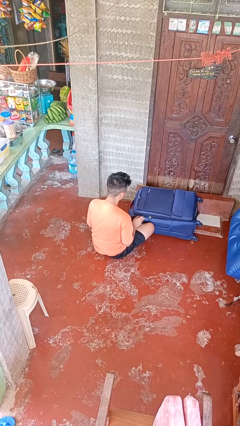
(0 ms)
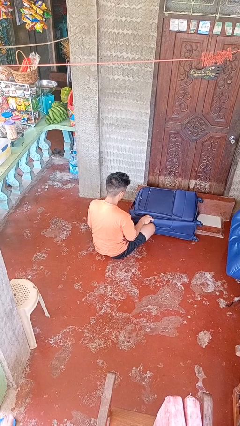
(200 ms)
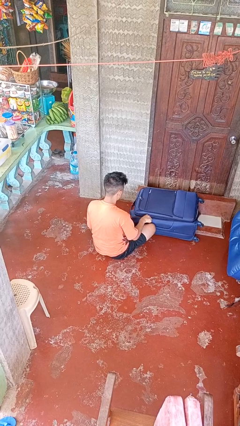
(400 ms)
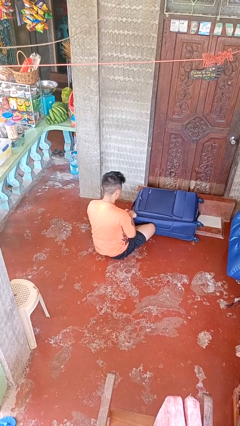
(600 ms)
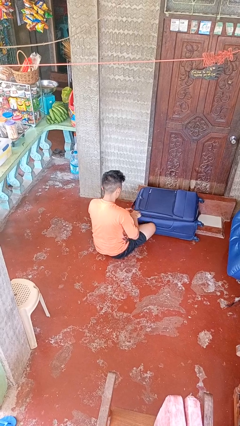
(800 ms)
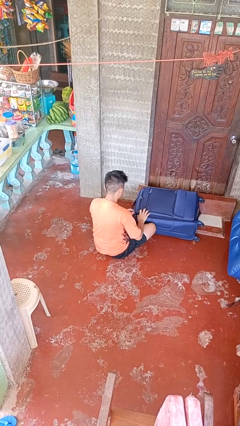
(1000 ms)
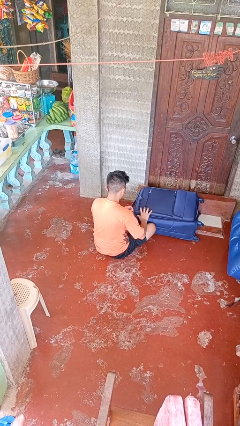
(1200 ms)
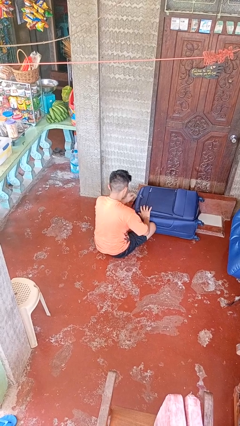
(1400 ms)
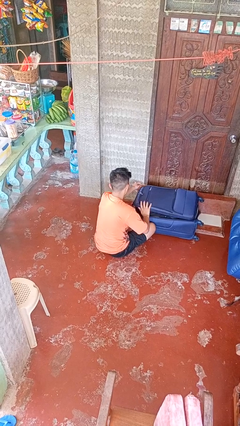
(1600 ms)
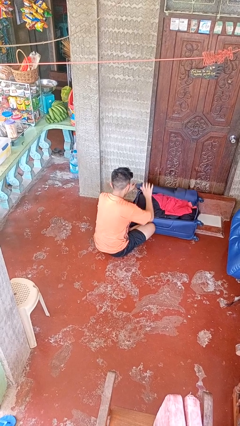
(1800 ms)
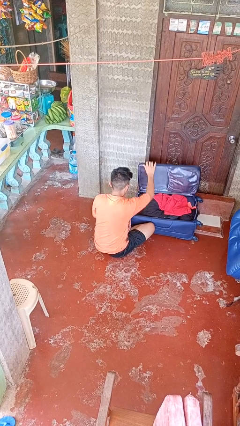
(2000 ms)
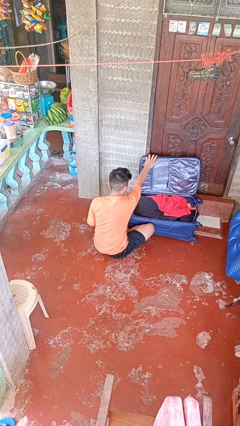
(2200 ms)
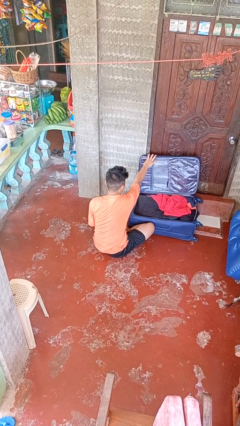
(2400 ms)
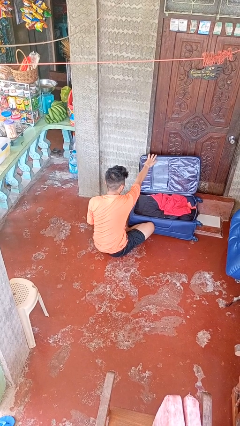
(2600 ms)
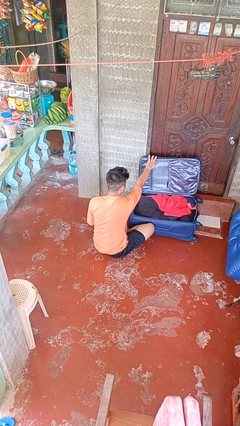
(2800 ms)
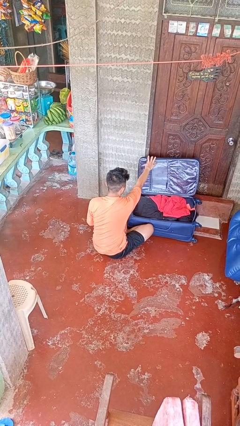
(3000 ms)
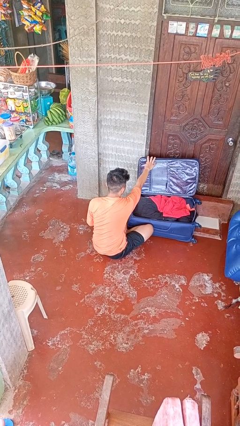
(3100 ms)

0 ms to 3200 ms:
person opens suitcase

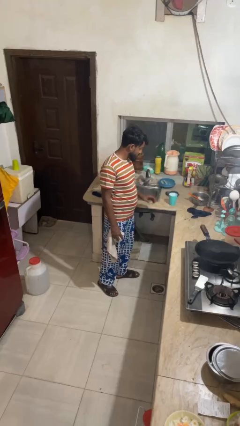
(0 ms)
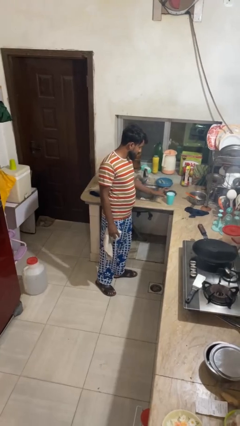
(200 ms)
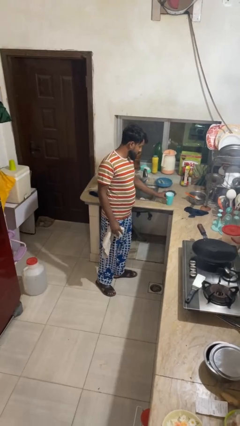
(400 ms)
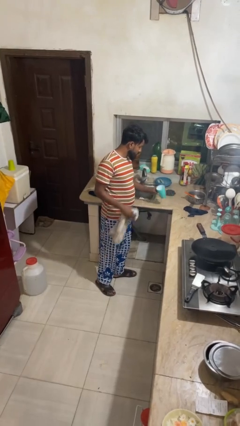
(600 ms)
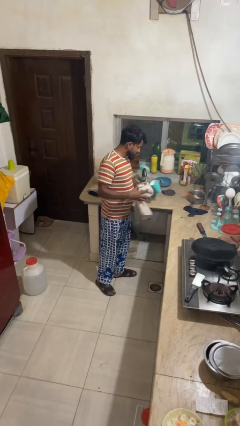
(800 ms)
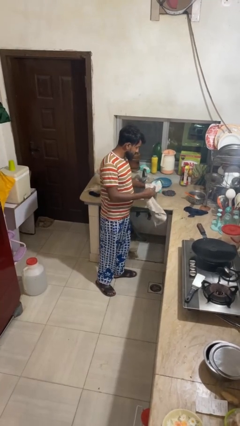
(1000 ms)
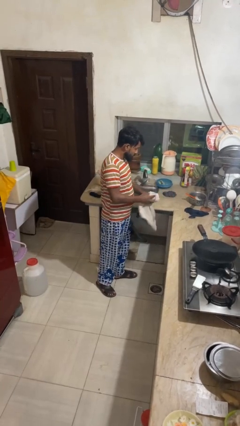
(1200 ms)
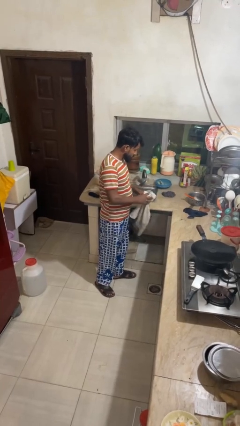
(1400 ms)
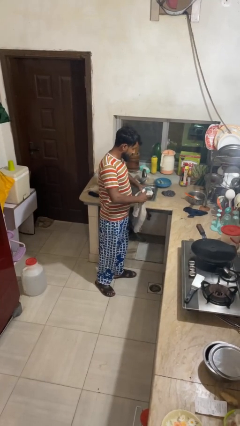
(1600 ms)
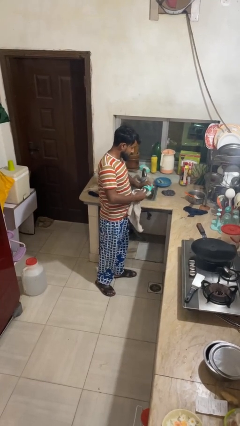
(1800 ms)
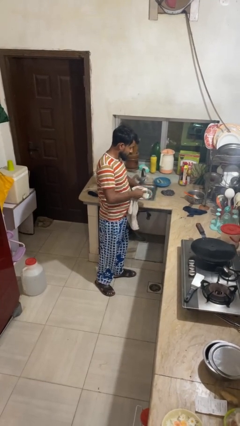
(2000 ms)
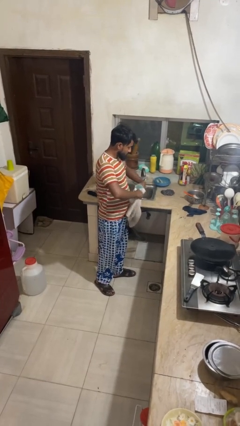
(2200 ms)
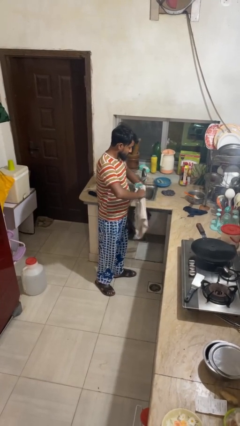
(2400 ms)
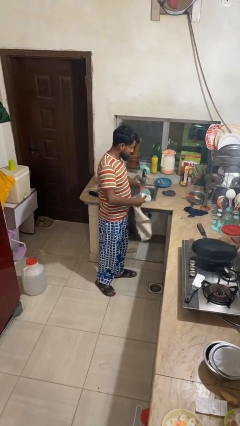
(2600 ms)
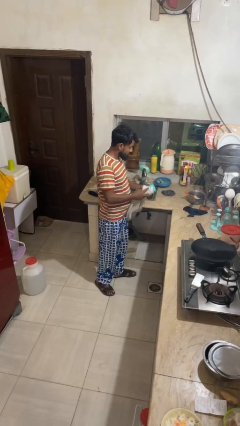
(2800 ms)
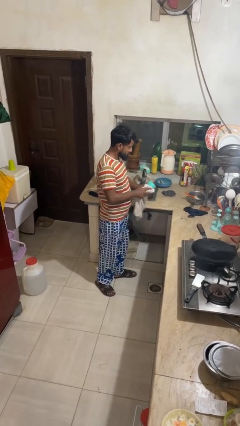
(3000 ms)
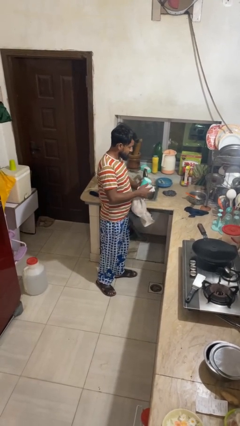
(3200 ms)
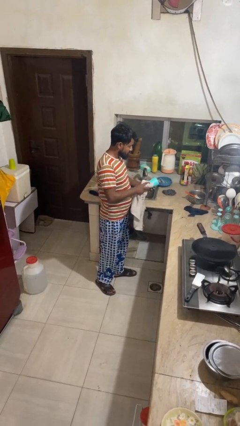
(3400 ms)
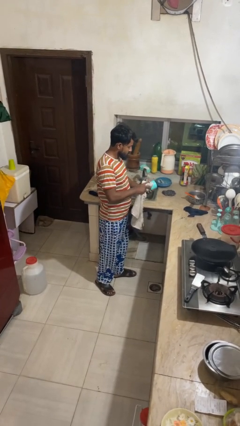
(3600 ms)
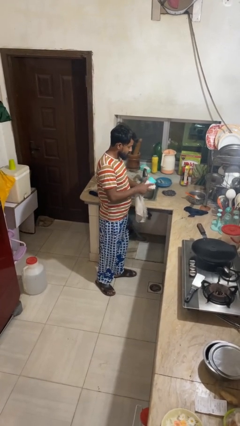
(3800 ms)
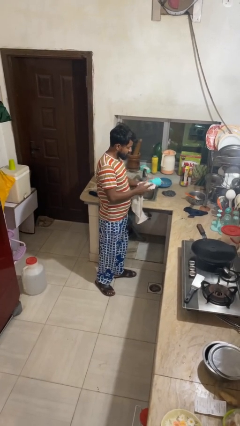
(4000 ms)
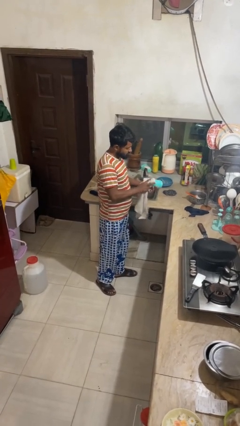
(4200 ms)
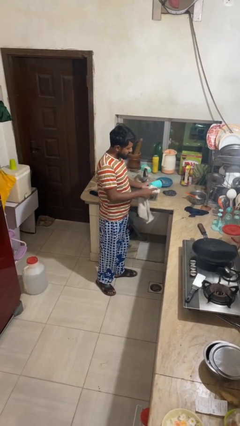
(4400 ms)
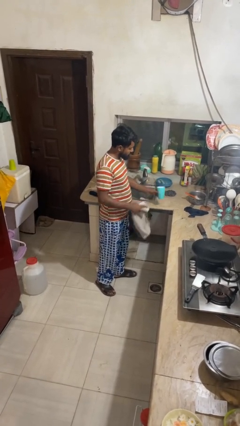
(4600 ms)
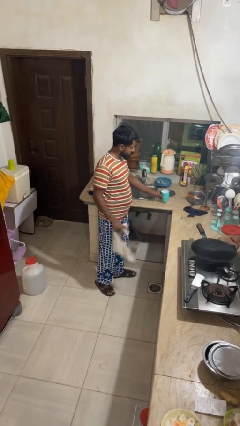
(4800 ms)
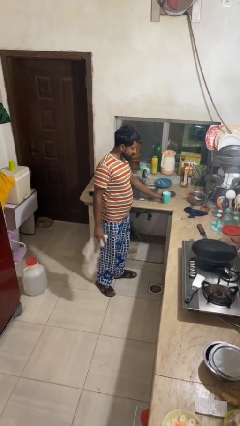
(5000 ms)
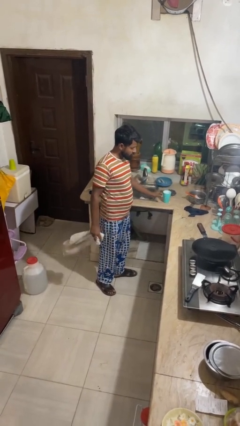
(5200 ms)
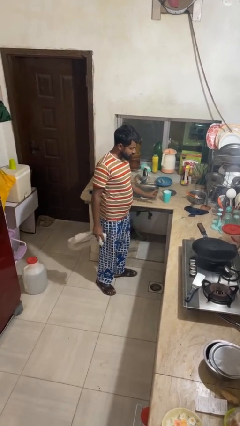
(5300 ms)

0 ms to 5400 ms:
person dries dish

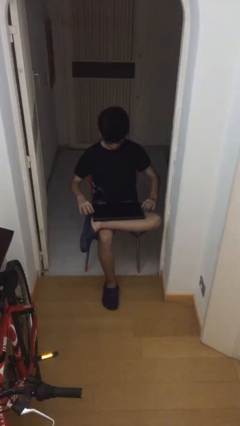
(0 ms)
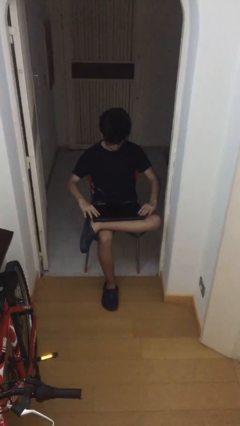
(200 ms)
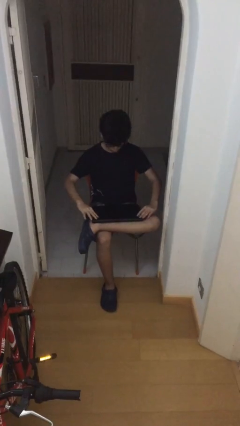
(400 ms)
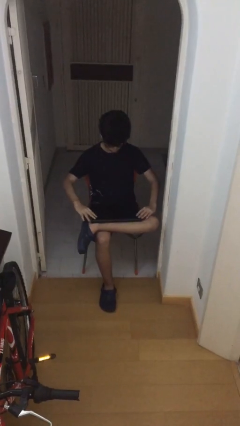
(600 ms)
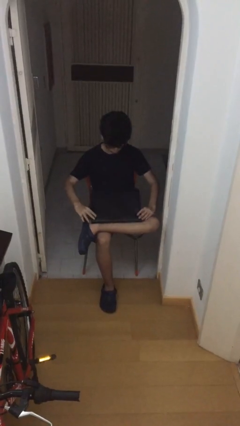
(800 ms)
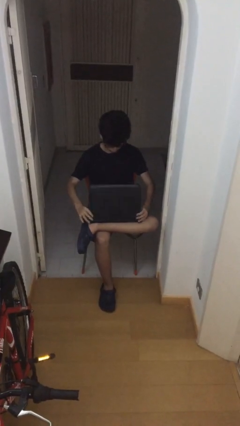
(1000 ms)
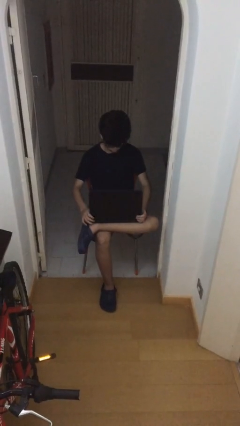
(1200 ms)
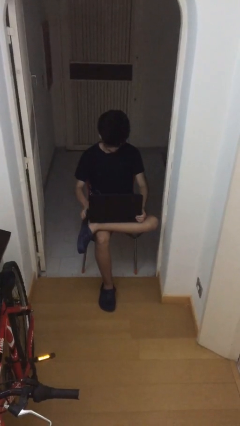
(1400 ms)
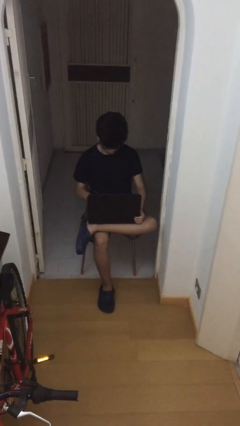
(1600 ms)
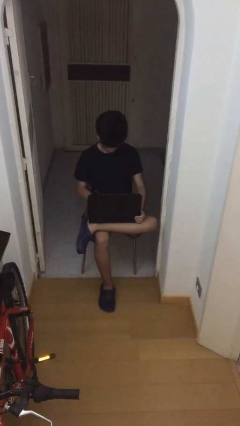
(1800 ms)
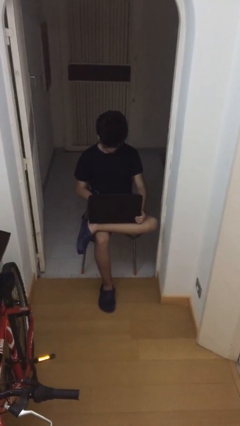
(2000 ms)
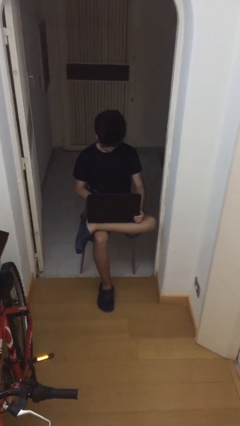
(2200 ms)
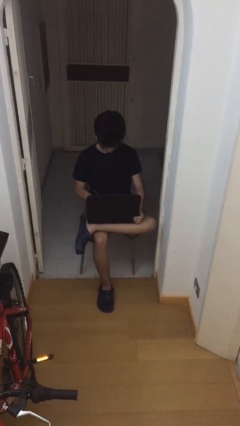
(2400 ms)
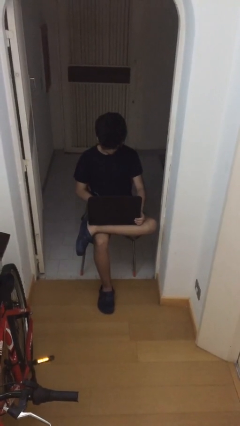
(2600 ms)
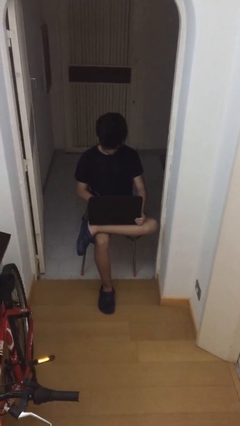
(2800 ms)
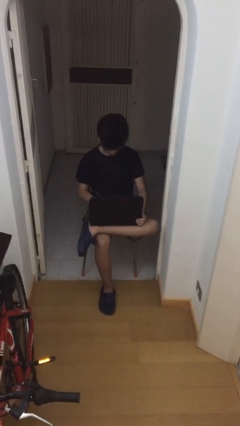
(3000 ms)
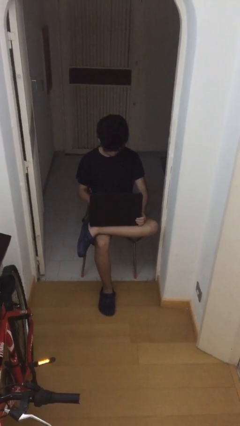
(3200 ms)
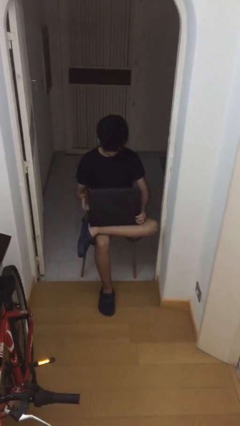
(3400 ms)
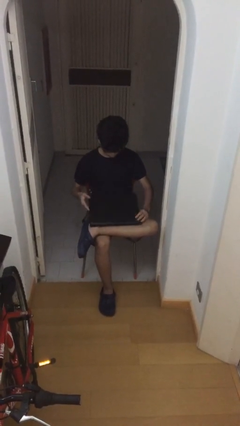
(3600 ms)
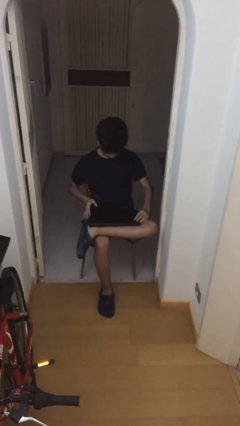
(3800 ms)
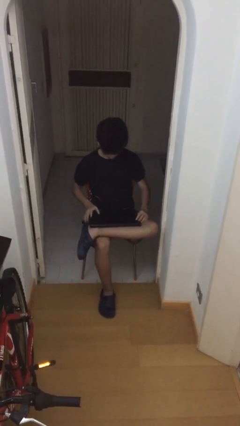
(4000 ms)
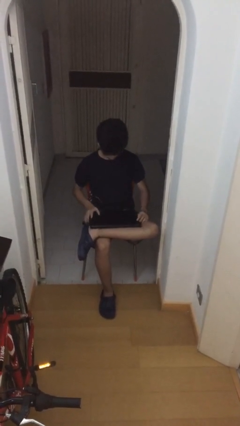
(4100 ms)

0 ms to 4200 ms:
person interacts with laptop

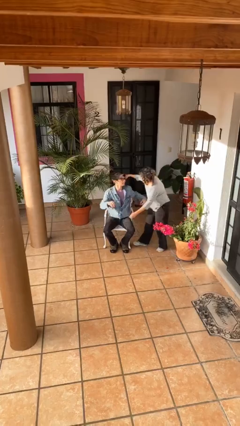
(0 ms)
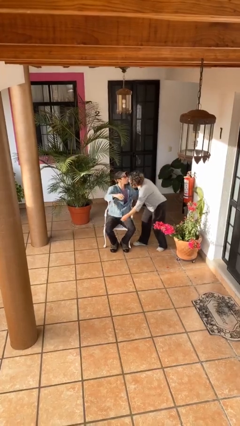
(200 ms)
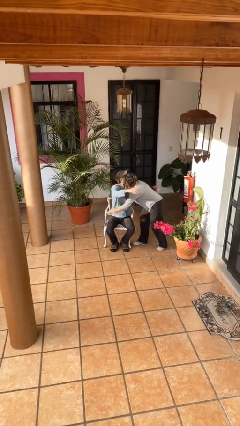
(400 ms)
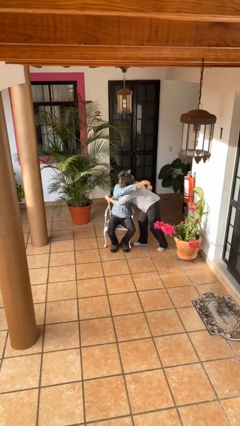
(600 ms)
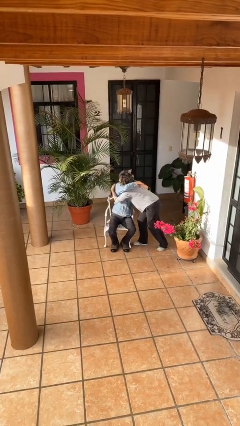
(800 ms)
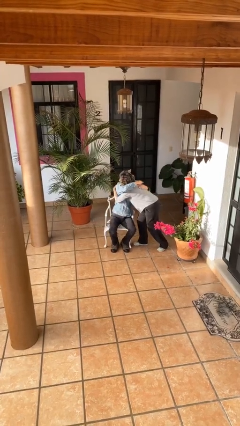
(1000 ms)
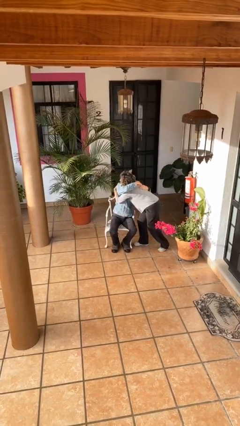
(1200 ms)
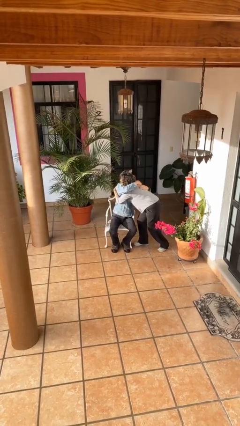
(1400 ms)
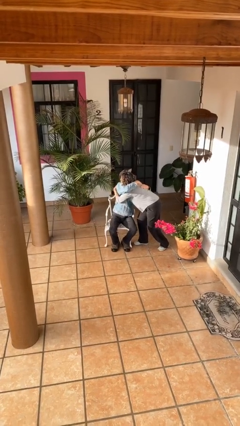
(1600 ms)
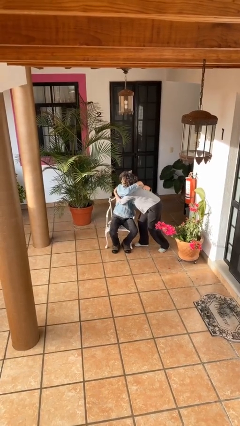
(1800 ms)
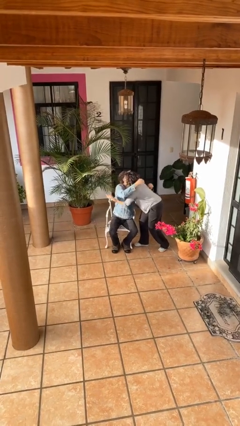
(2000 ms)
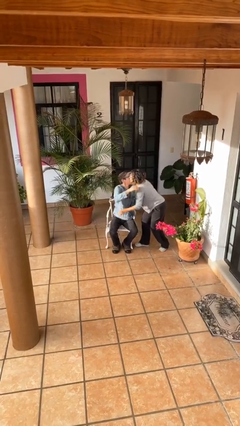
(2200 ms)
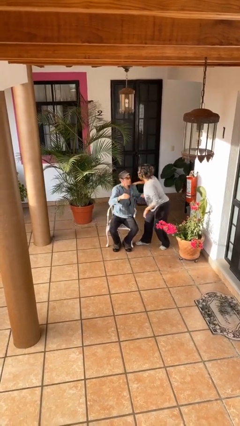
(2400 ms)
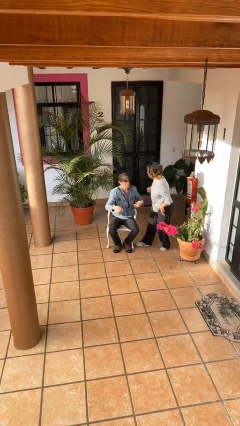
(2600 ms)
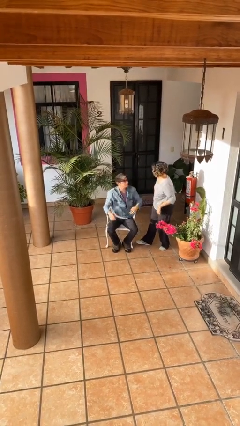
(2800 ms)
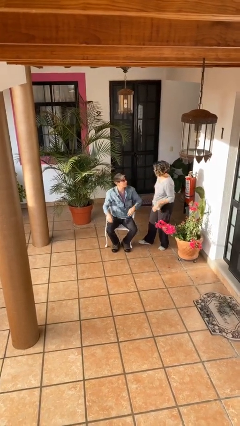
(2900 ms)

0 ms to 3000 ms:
person embraces person

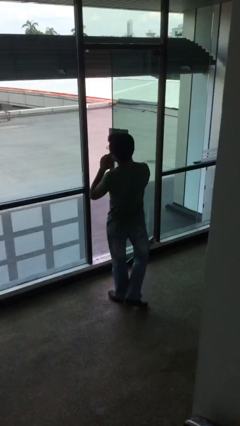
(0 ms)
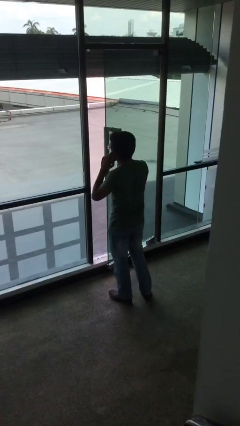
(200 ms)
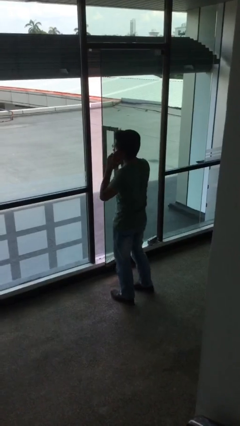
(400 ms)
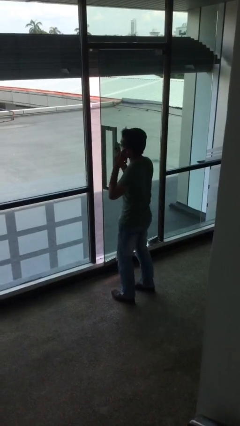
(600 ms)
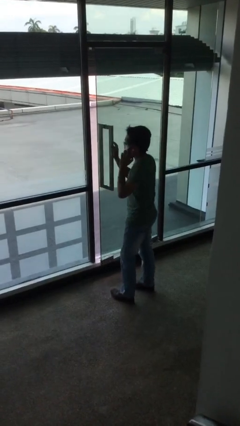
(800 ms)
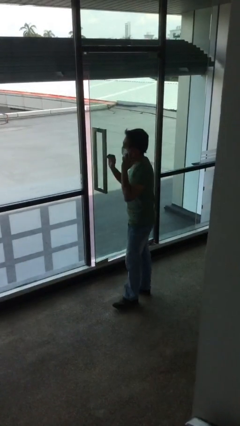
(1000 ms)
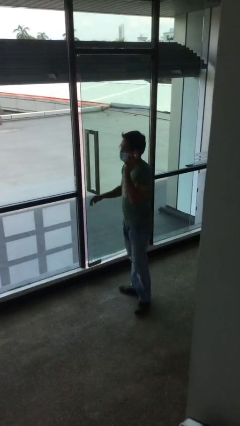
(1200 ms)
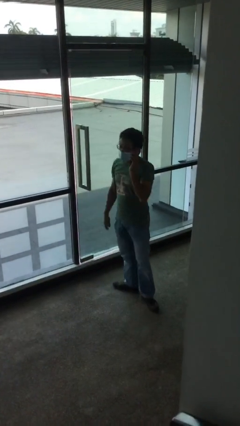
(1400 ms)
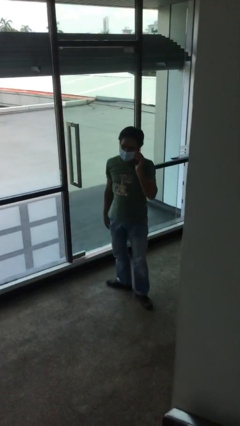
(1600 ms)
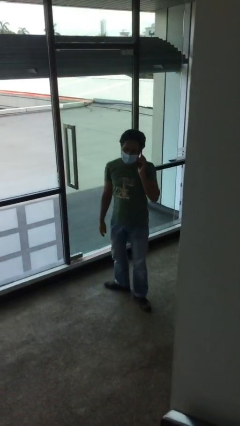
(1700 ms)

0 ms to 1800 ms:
person closes facility door
